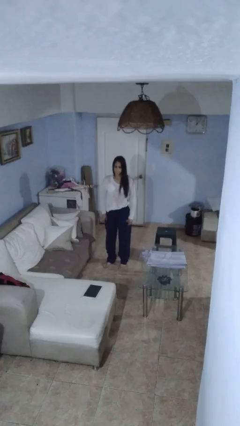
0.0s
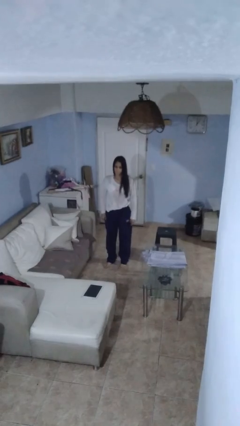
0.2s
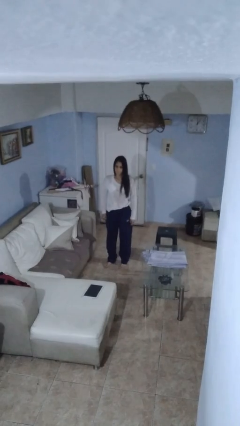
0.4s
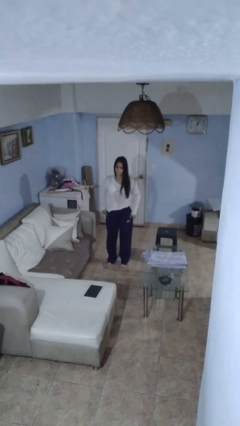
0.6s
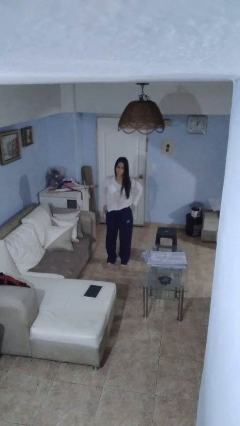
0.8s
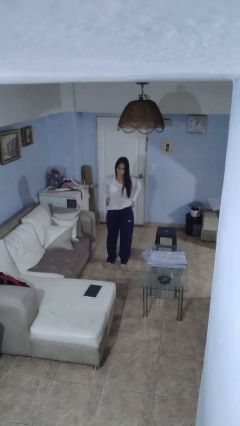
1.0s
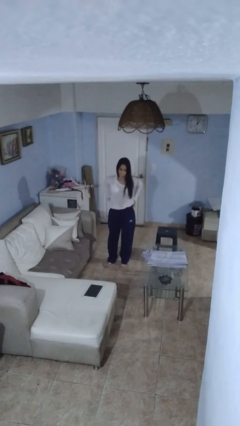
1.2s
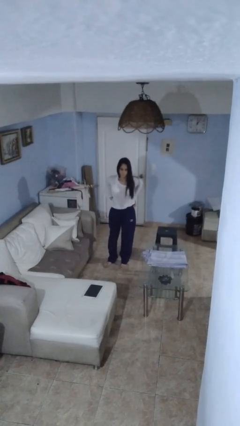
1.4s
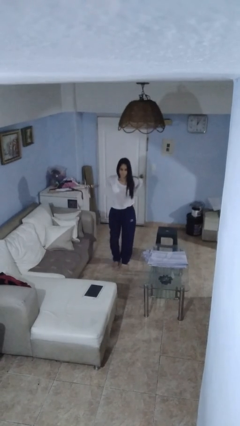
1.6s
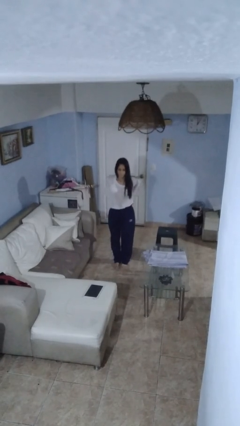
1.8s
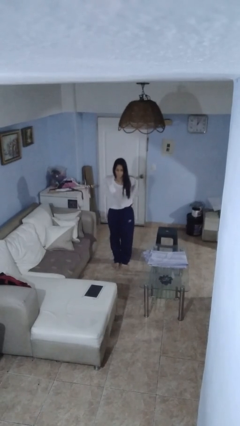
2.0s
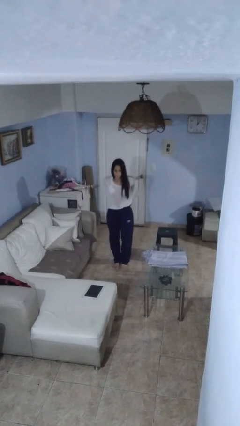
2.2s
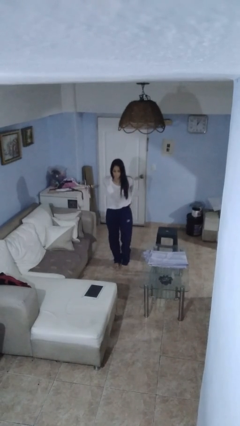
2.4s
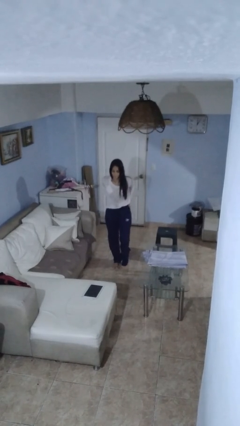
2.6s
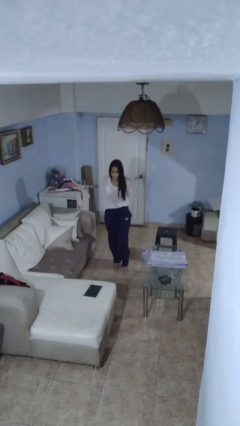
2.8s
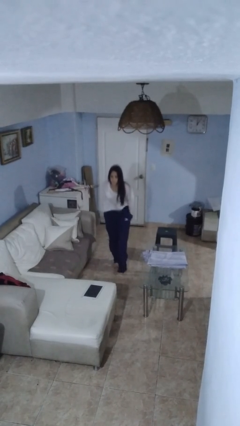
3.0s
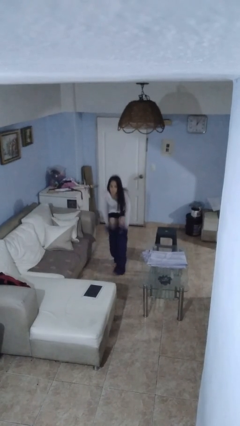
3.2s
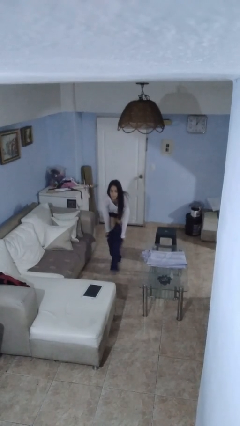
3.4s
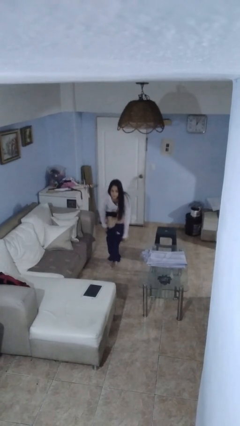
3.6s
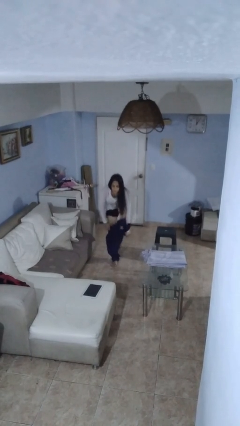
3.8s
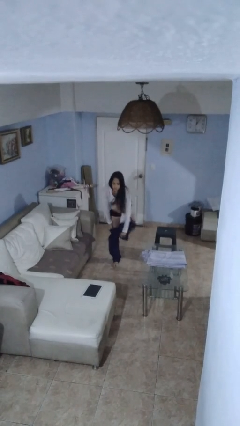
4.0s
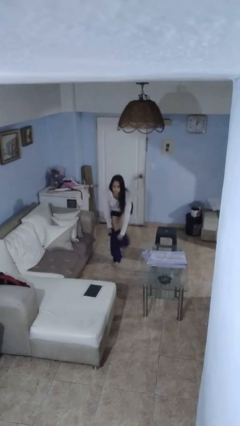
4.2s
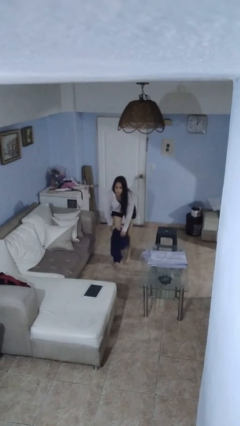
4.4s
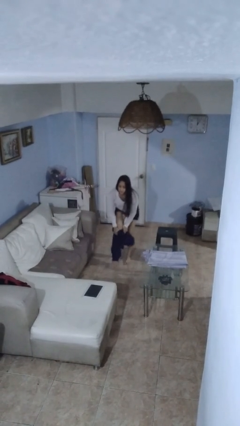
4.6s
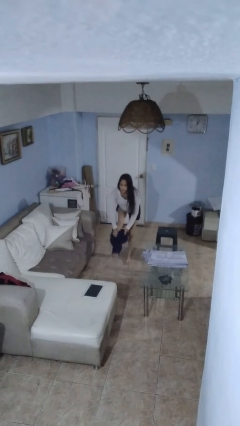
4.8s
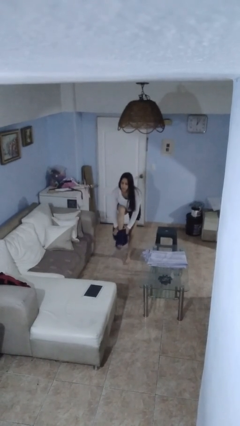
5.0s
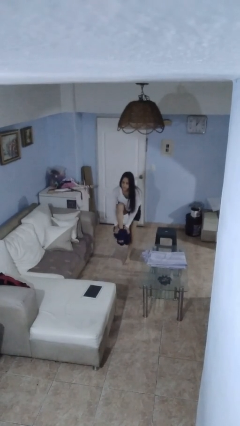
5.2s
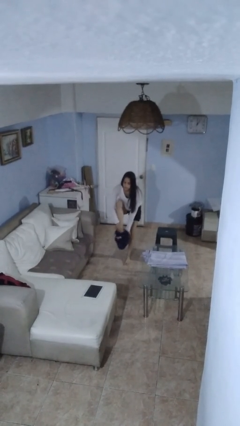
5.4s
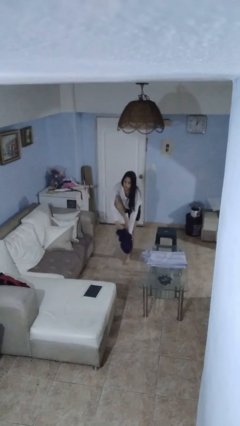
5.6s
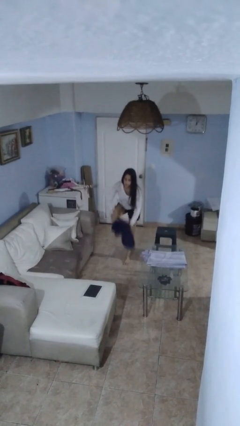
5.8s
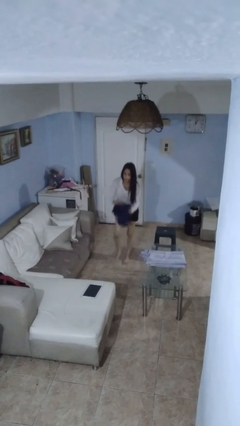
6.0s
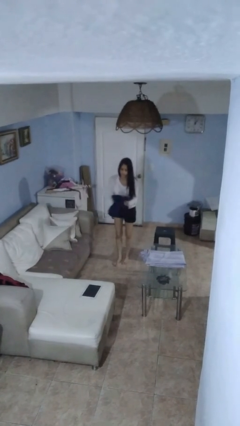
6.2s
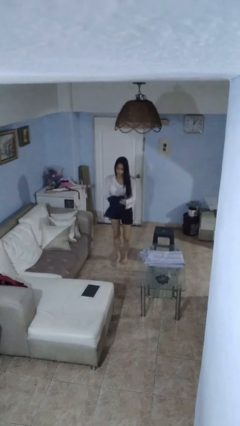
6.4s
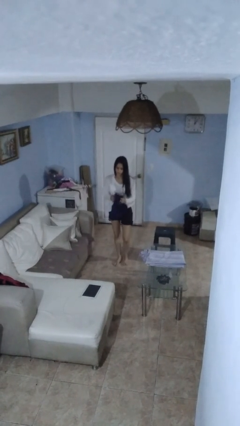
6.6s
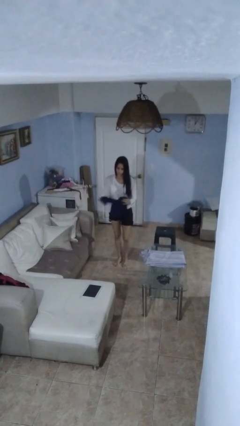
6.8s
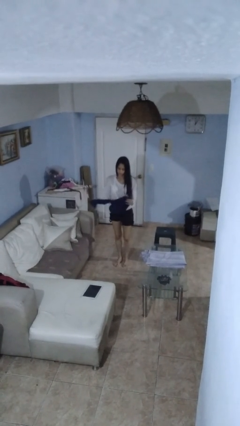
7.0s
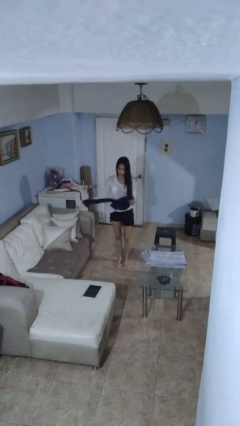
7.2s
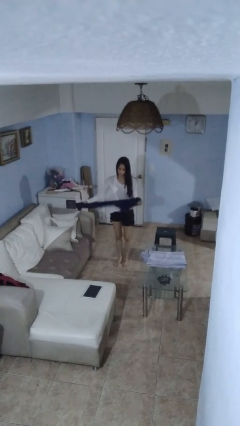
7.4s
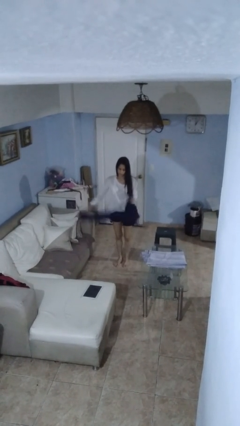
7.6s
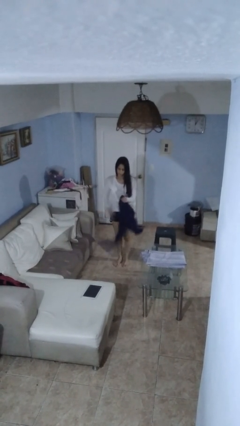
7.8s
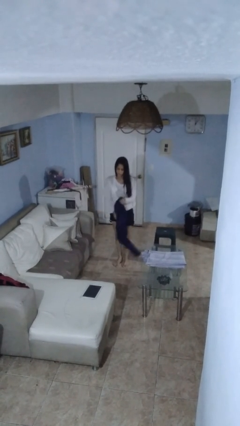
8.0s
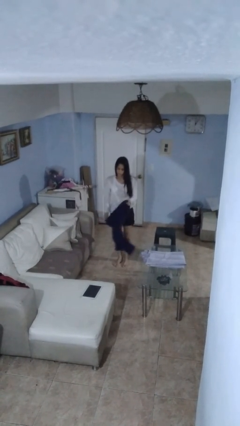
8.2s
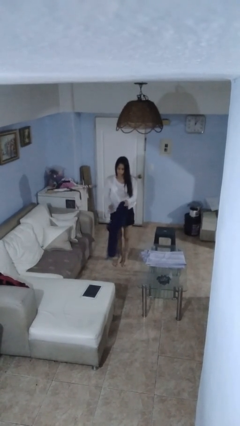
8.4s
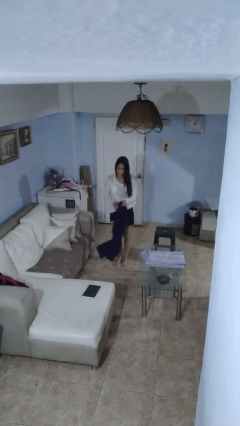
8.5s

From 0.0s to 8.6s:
person takes off pants

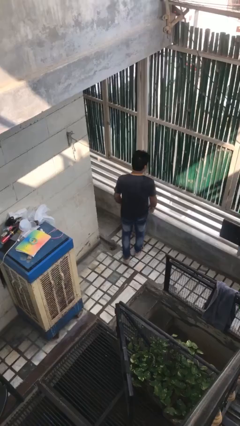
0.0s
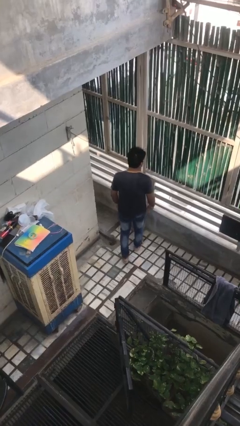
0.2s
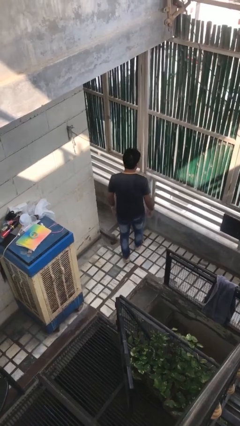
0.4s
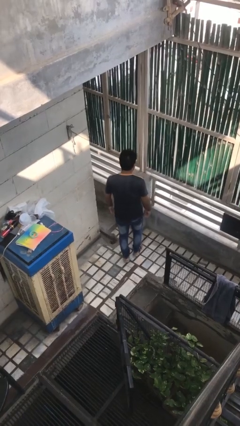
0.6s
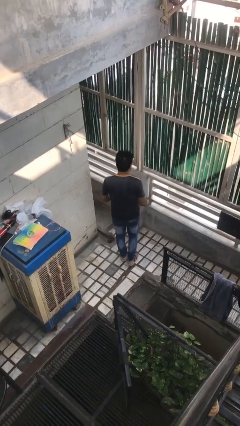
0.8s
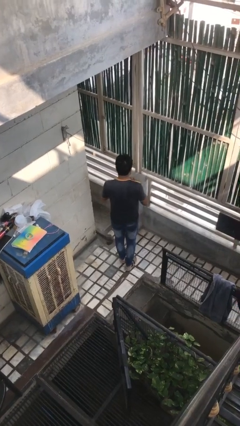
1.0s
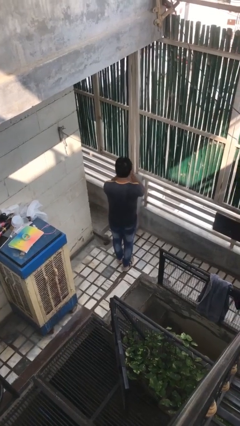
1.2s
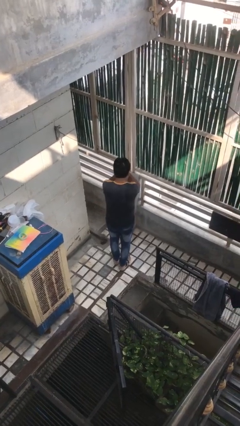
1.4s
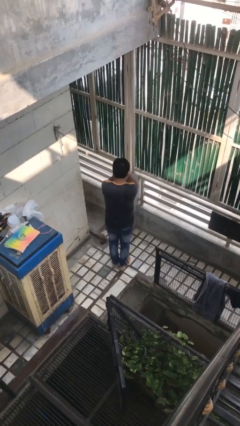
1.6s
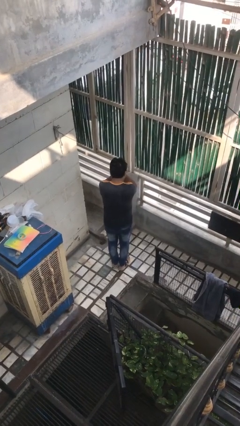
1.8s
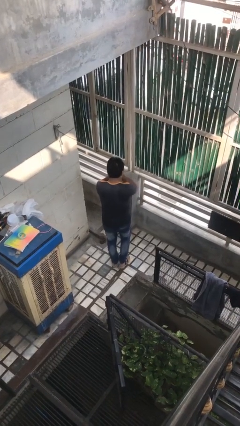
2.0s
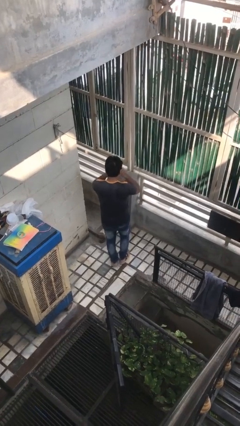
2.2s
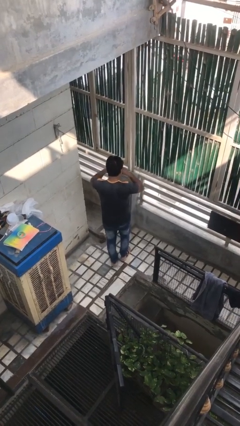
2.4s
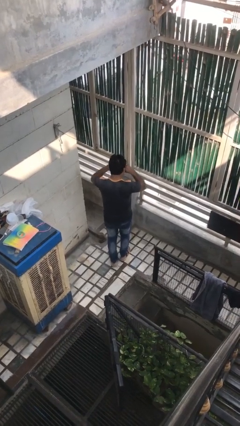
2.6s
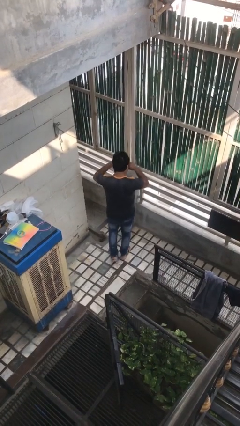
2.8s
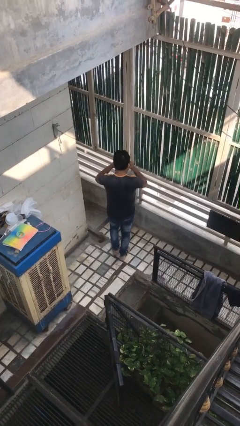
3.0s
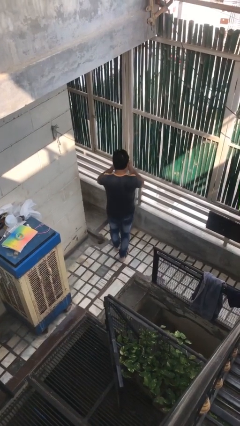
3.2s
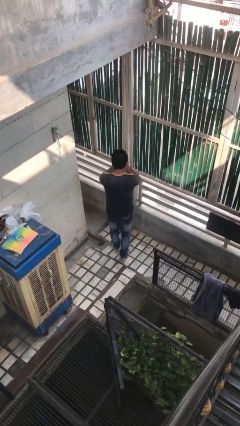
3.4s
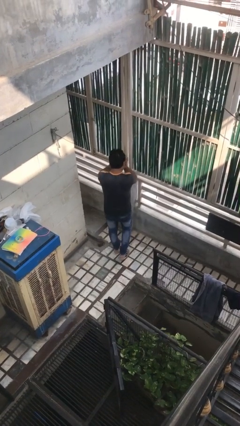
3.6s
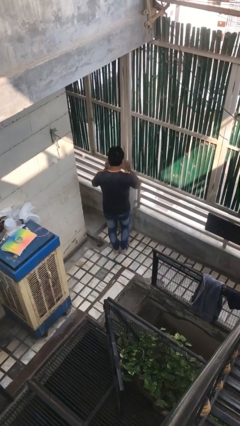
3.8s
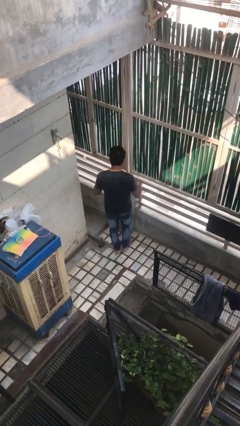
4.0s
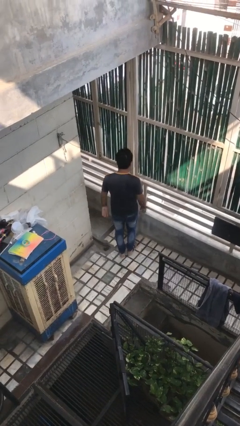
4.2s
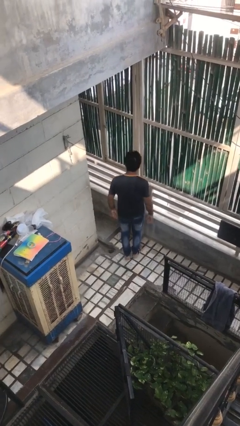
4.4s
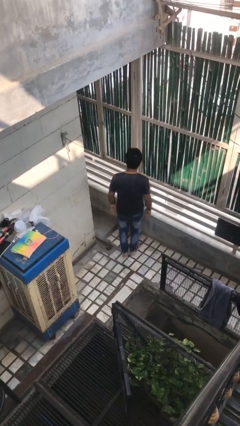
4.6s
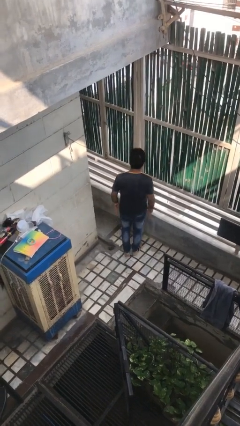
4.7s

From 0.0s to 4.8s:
person rubs eyes

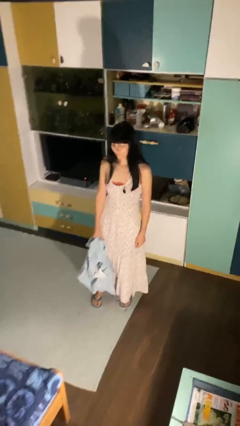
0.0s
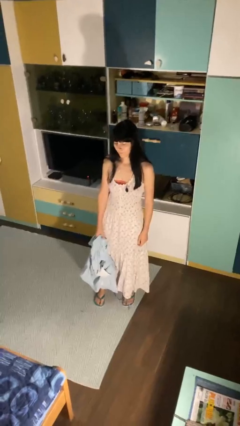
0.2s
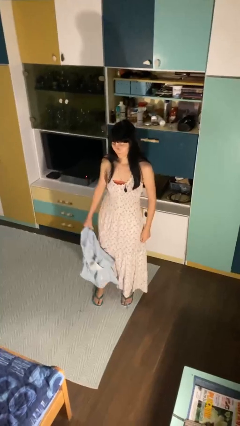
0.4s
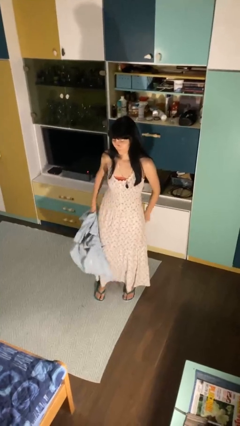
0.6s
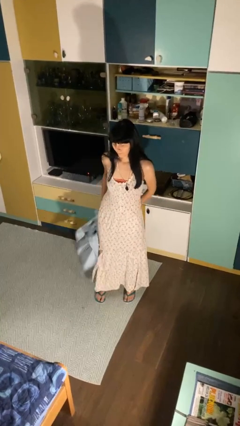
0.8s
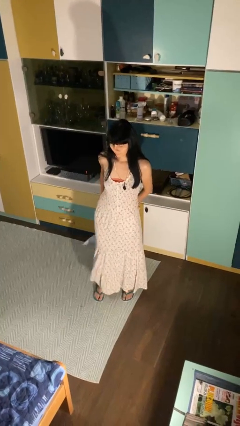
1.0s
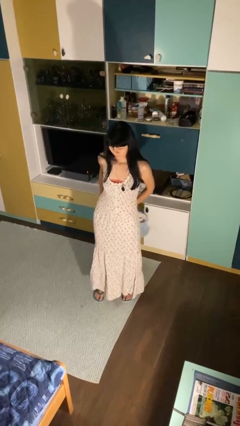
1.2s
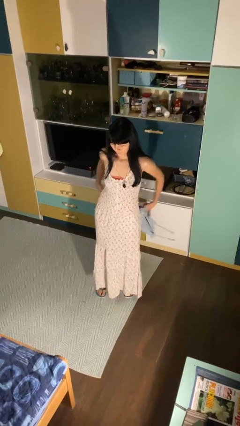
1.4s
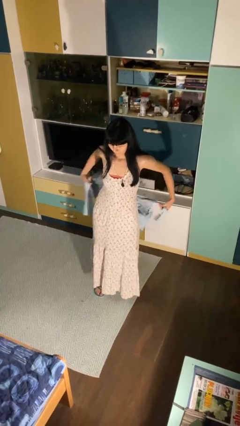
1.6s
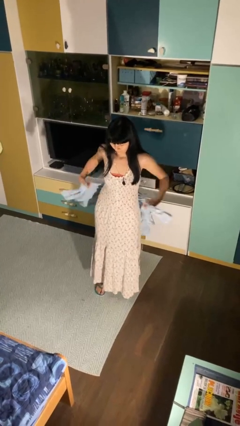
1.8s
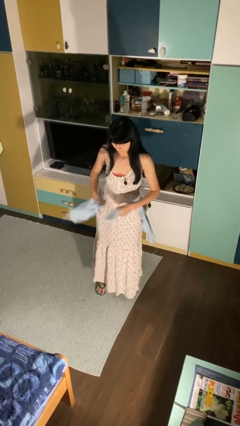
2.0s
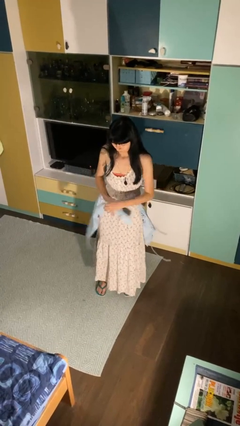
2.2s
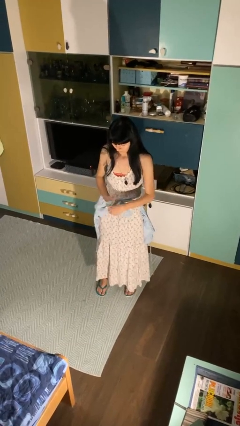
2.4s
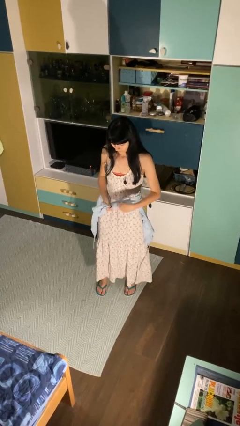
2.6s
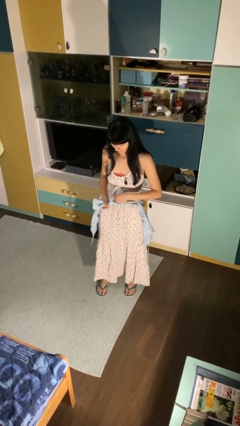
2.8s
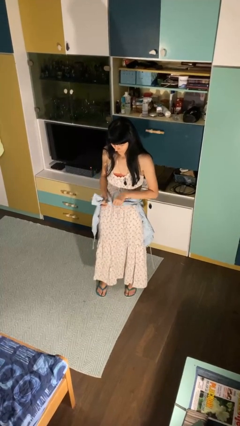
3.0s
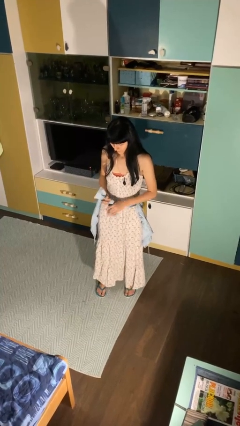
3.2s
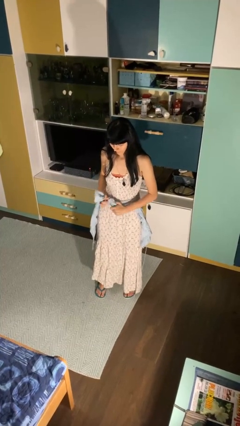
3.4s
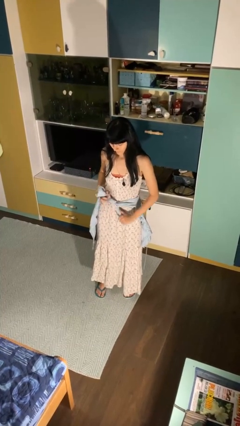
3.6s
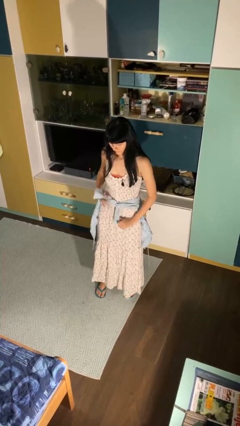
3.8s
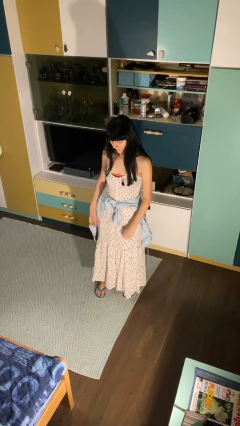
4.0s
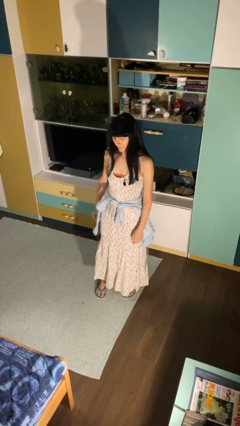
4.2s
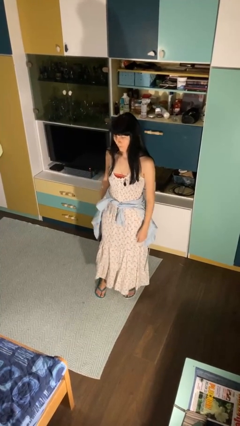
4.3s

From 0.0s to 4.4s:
person ties jacket around waist

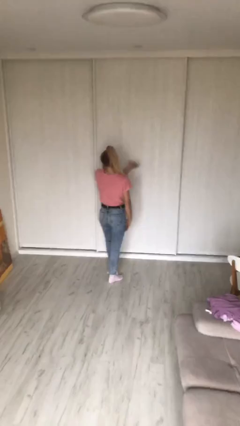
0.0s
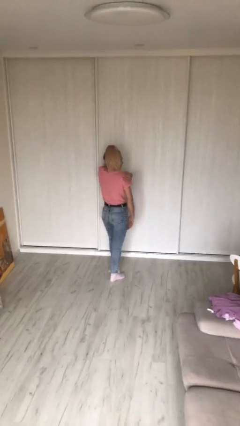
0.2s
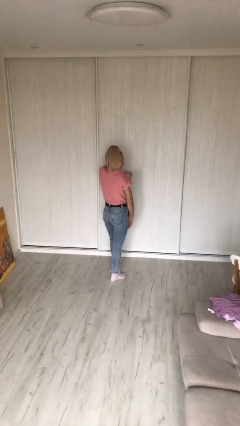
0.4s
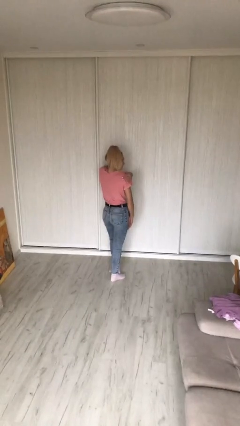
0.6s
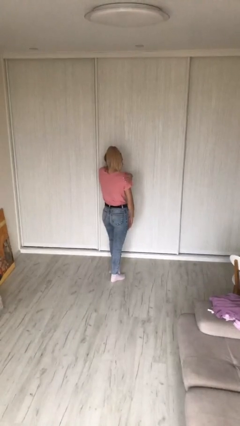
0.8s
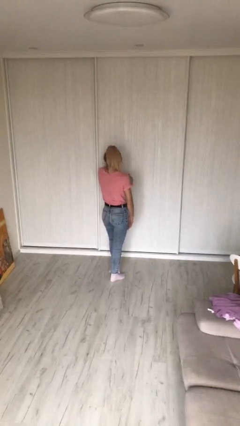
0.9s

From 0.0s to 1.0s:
person swats bug
